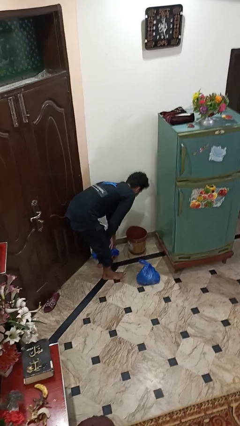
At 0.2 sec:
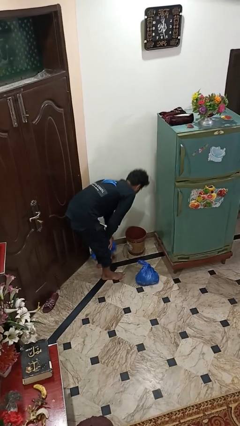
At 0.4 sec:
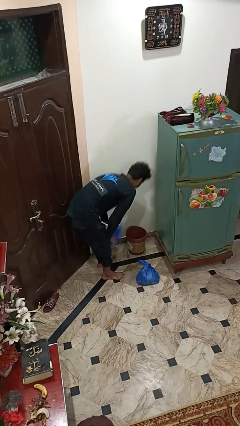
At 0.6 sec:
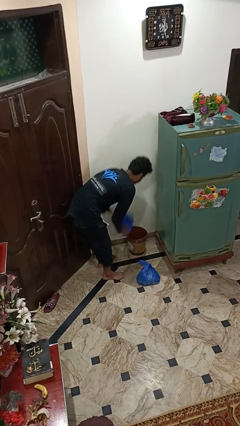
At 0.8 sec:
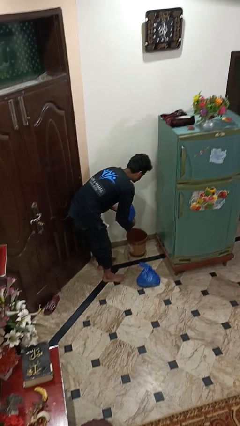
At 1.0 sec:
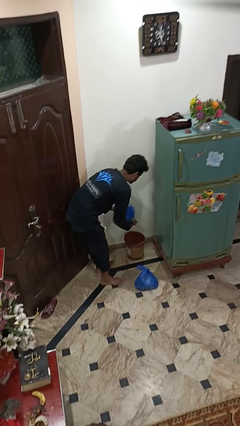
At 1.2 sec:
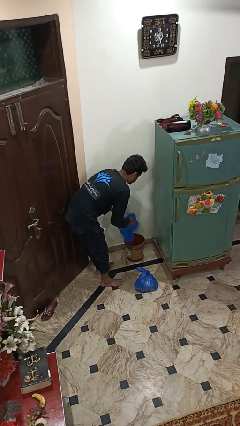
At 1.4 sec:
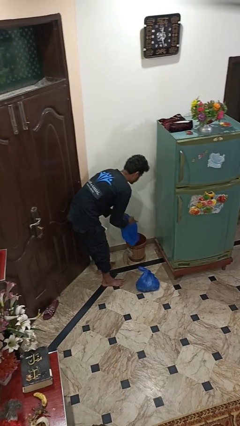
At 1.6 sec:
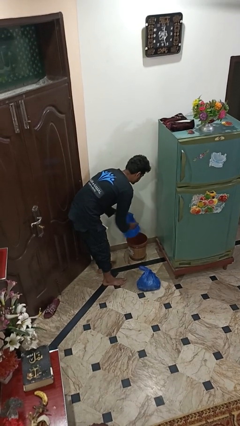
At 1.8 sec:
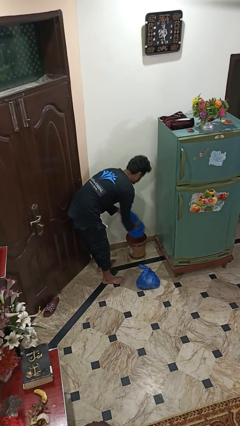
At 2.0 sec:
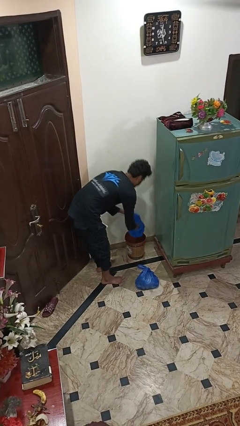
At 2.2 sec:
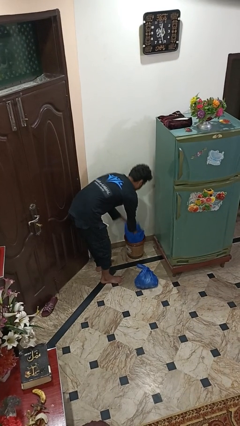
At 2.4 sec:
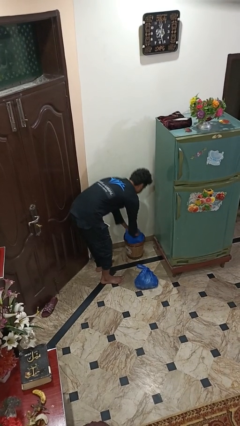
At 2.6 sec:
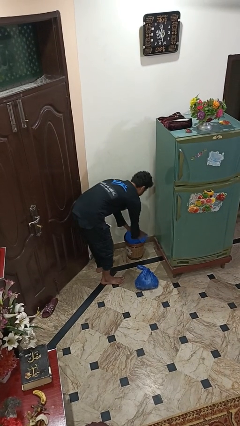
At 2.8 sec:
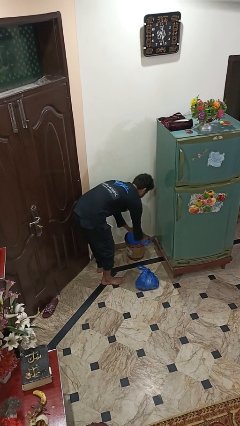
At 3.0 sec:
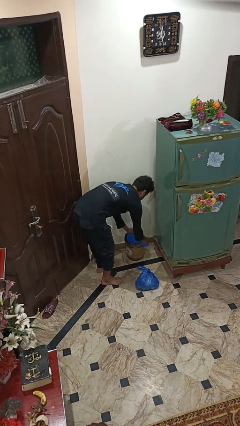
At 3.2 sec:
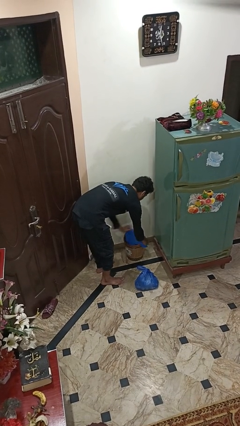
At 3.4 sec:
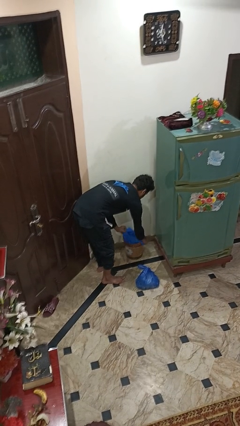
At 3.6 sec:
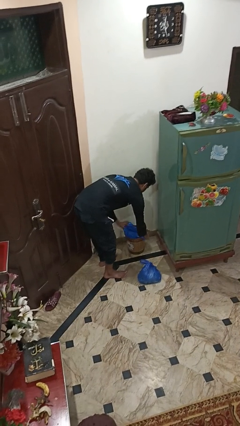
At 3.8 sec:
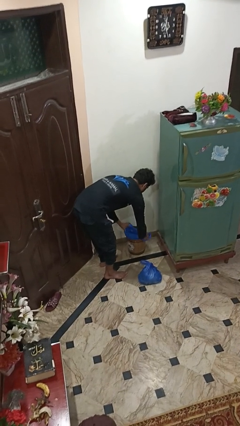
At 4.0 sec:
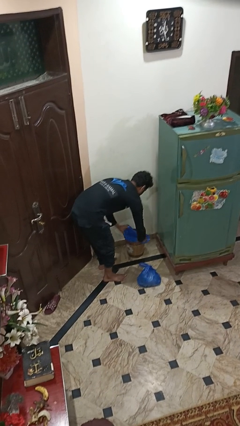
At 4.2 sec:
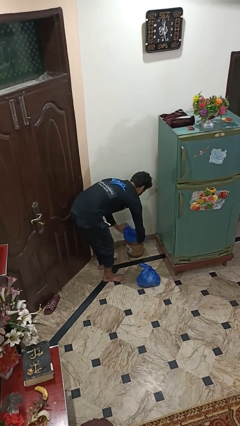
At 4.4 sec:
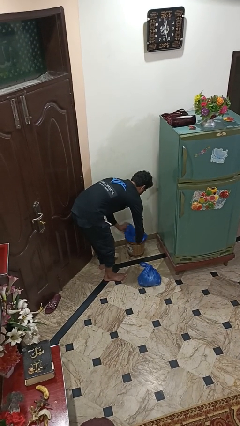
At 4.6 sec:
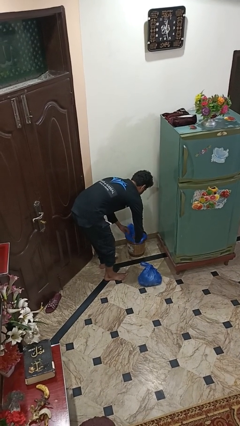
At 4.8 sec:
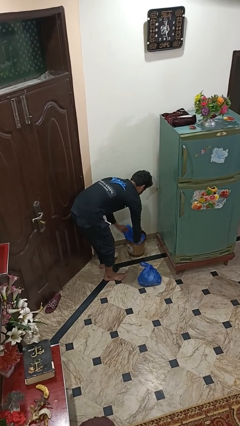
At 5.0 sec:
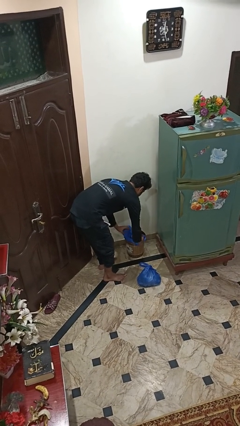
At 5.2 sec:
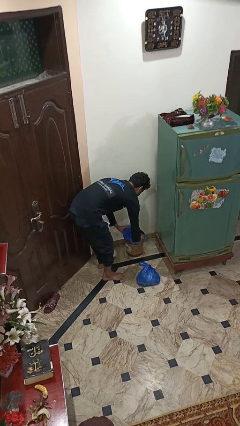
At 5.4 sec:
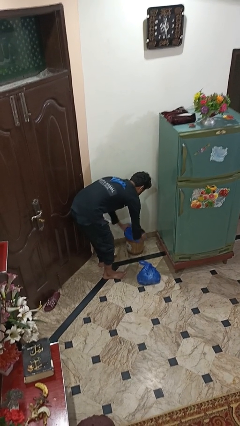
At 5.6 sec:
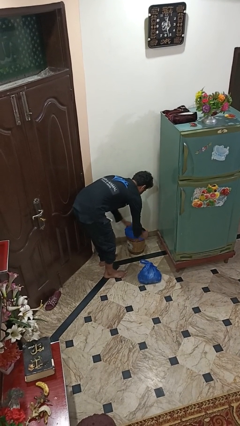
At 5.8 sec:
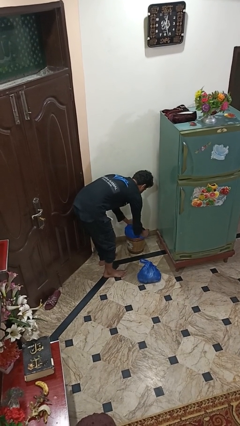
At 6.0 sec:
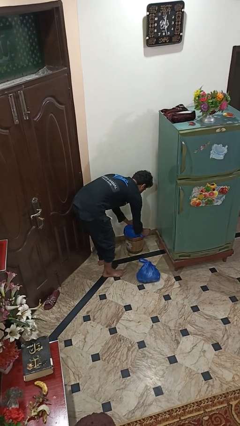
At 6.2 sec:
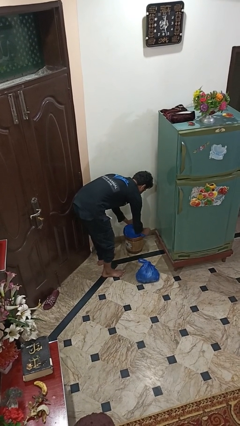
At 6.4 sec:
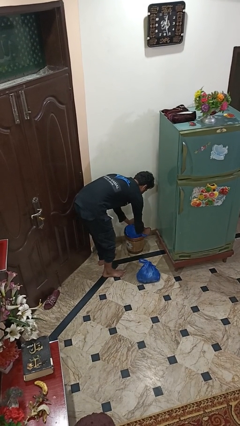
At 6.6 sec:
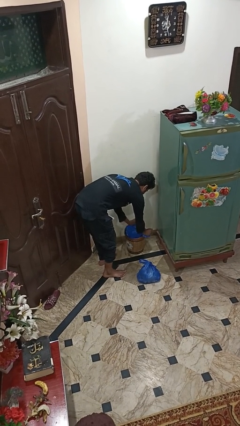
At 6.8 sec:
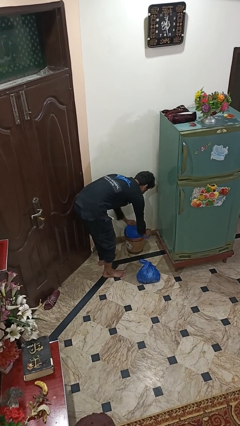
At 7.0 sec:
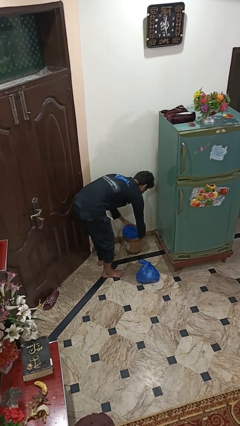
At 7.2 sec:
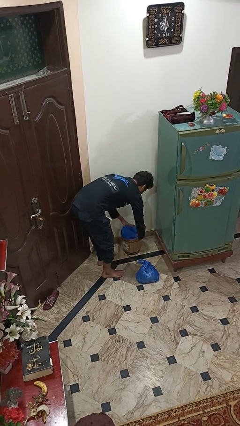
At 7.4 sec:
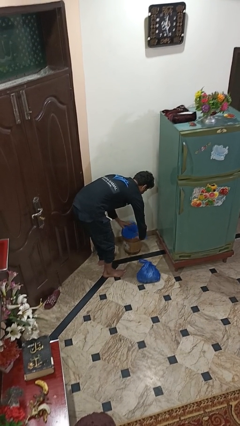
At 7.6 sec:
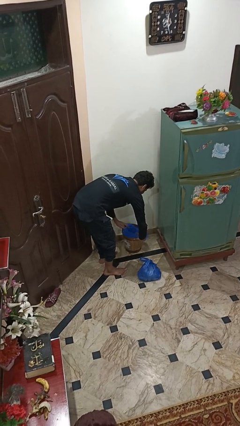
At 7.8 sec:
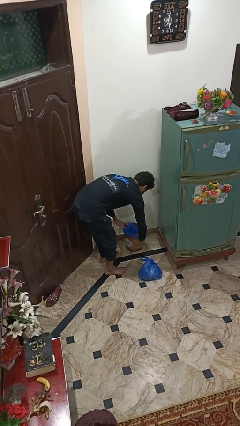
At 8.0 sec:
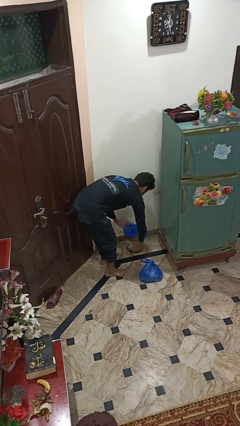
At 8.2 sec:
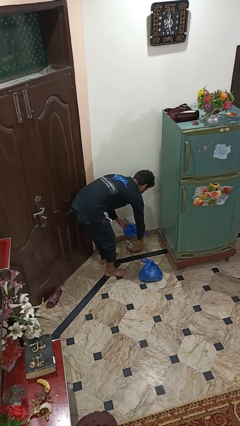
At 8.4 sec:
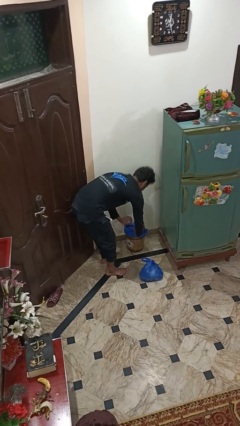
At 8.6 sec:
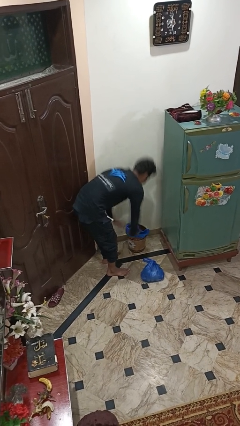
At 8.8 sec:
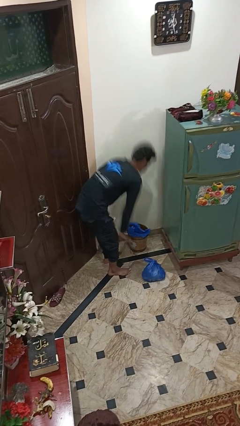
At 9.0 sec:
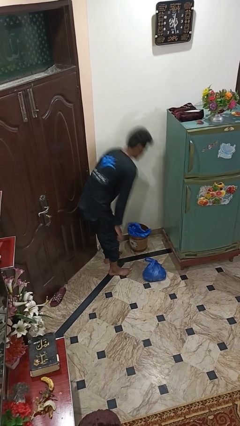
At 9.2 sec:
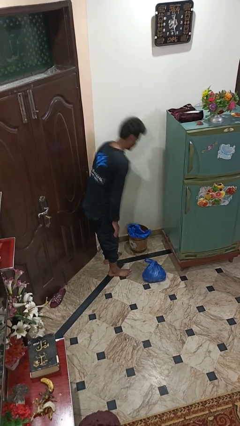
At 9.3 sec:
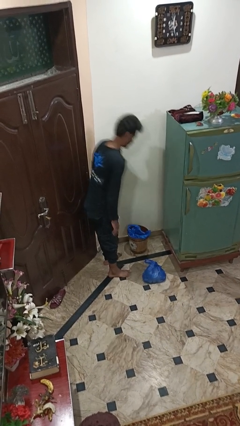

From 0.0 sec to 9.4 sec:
person inserts trashbag into trashcan

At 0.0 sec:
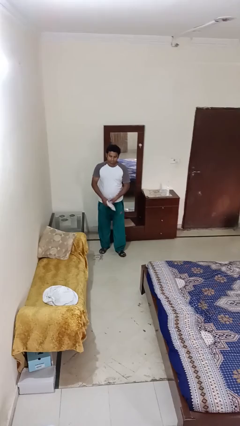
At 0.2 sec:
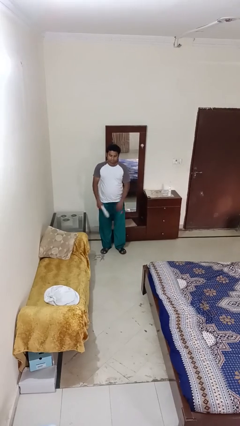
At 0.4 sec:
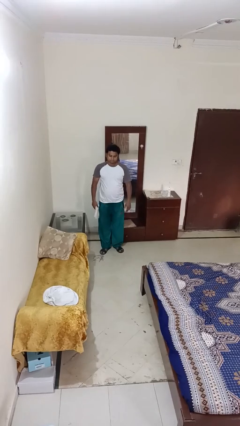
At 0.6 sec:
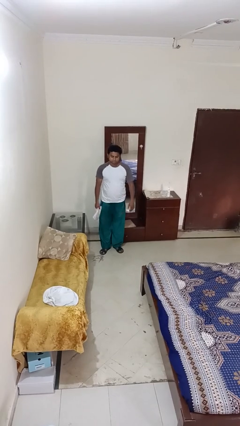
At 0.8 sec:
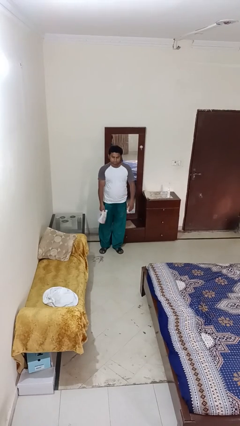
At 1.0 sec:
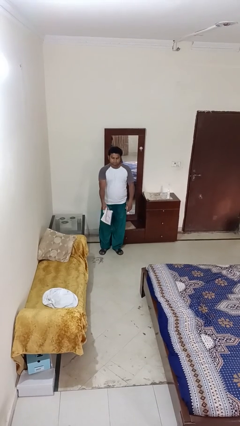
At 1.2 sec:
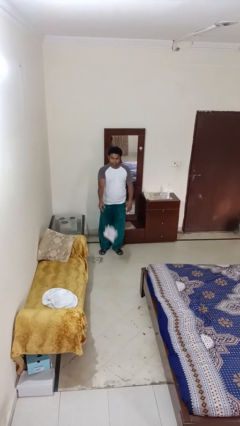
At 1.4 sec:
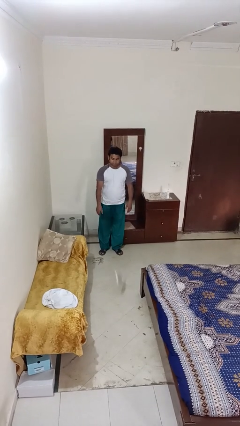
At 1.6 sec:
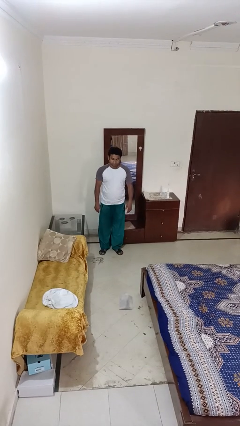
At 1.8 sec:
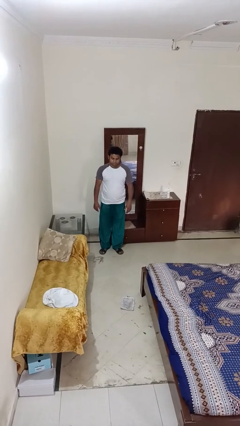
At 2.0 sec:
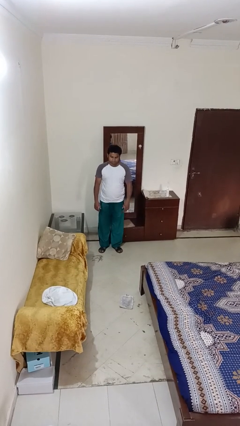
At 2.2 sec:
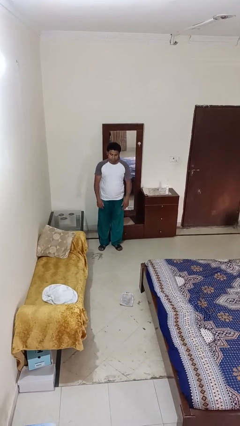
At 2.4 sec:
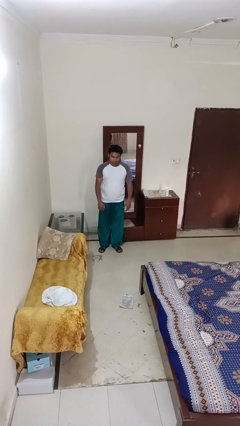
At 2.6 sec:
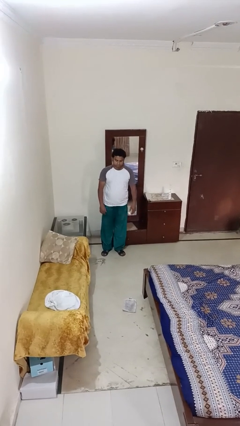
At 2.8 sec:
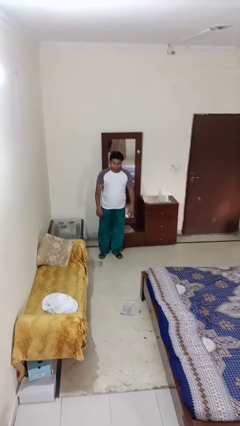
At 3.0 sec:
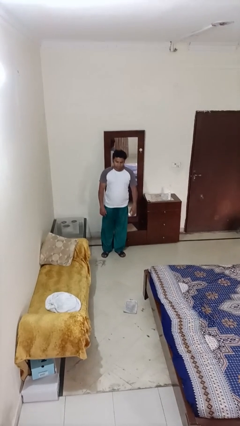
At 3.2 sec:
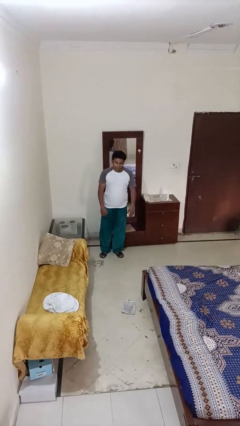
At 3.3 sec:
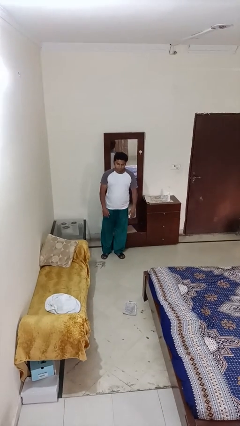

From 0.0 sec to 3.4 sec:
person throws object to ground

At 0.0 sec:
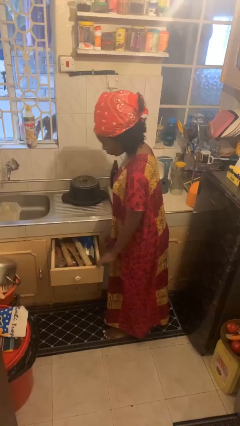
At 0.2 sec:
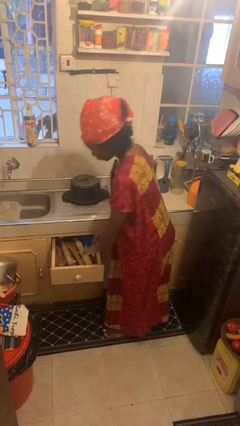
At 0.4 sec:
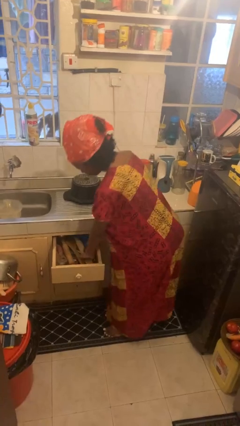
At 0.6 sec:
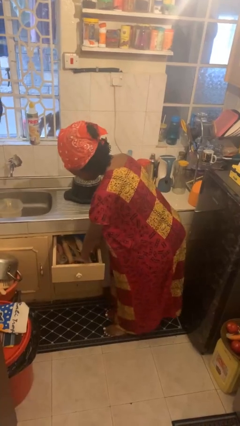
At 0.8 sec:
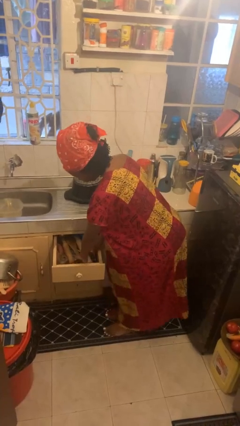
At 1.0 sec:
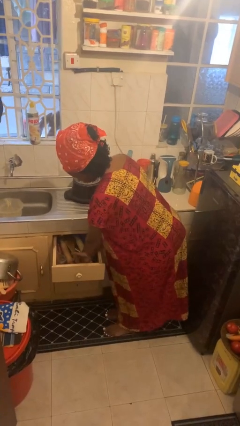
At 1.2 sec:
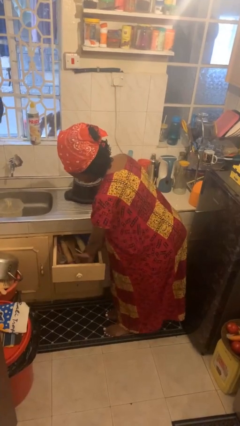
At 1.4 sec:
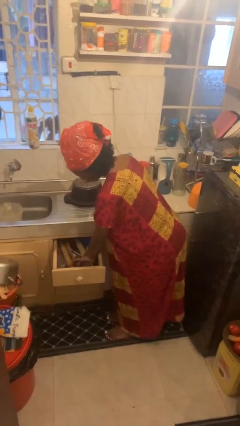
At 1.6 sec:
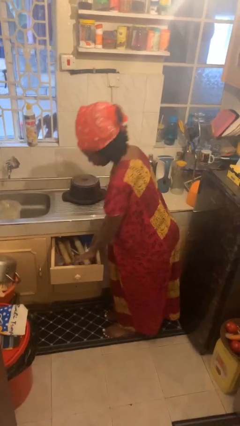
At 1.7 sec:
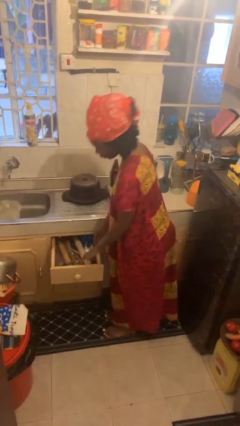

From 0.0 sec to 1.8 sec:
person searches in kitchen drawer

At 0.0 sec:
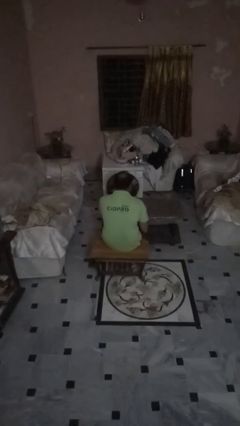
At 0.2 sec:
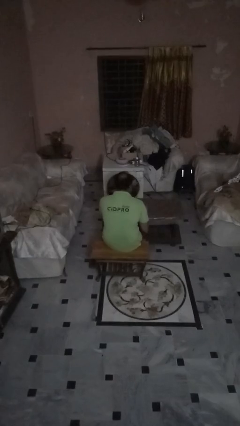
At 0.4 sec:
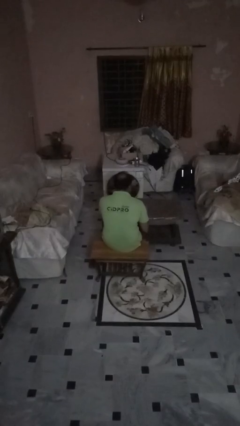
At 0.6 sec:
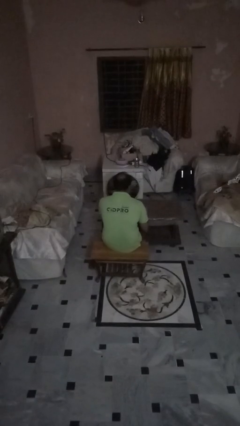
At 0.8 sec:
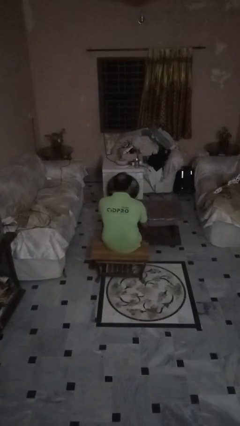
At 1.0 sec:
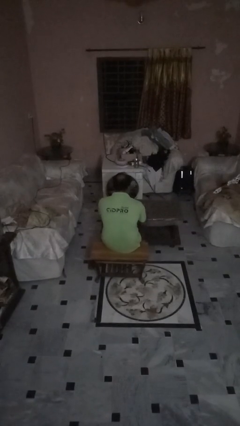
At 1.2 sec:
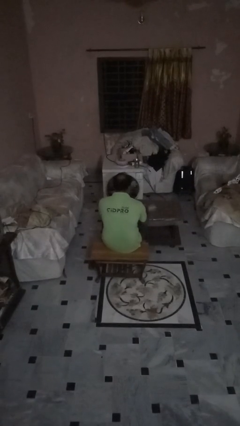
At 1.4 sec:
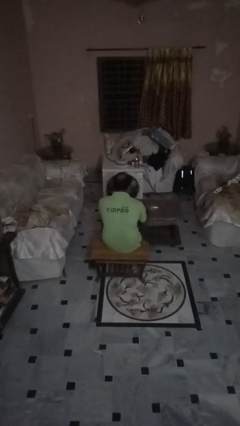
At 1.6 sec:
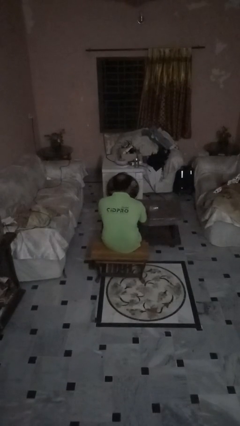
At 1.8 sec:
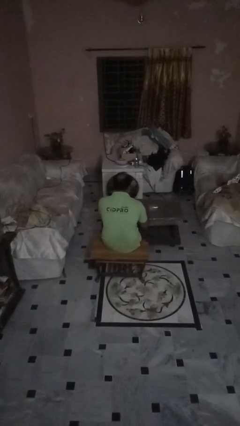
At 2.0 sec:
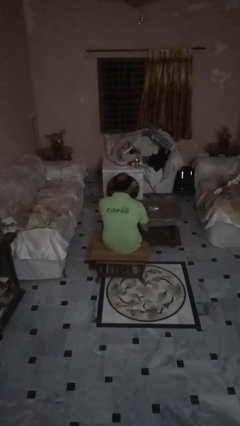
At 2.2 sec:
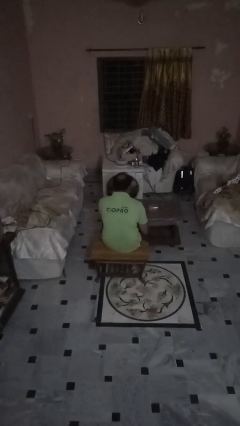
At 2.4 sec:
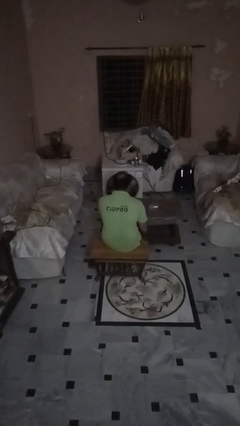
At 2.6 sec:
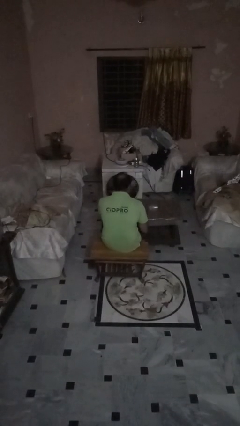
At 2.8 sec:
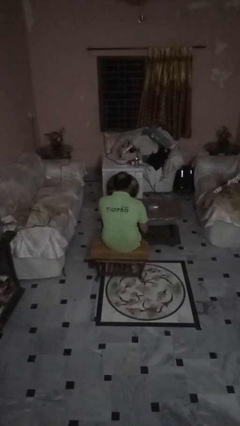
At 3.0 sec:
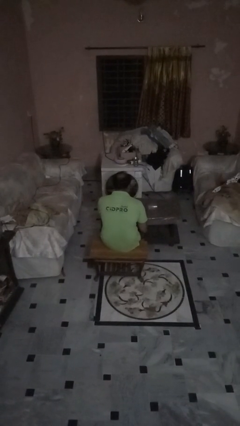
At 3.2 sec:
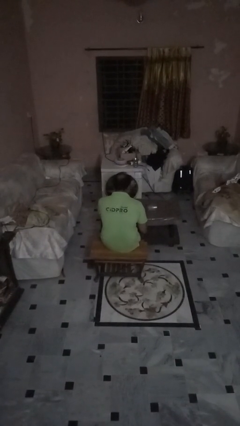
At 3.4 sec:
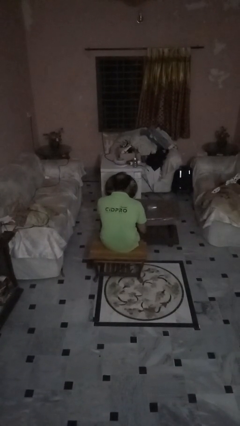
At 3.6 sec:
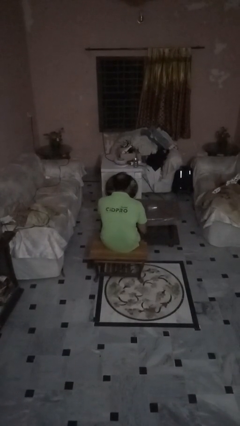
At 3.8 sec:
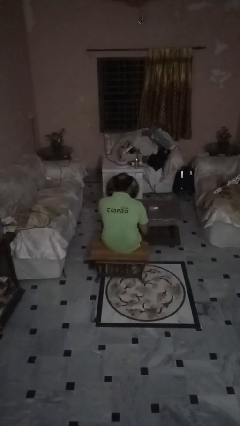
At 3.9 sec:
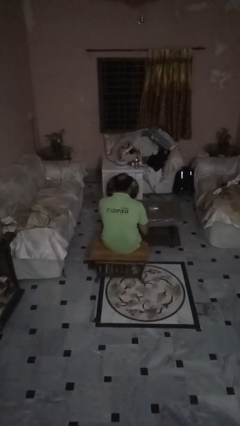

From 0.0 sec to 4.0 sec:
person knocks over glass
